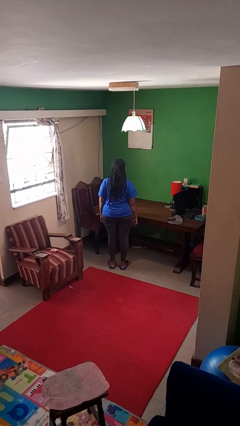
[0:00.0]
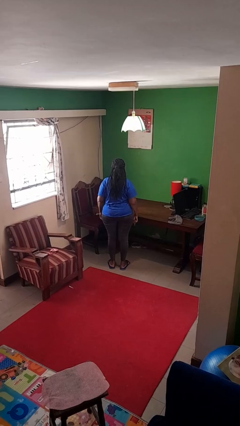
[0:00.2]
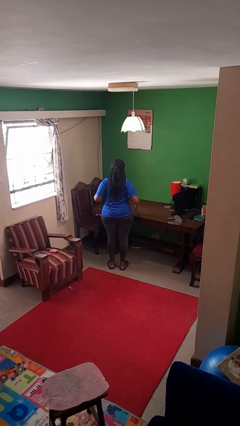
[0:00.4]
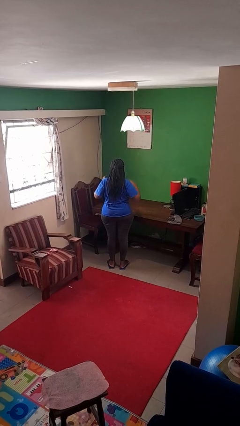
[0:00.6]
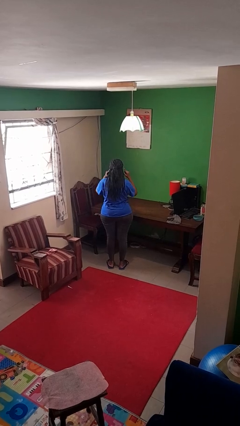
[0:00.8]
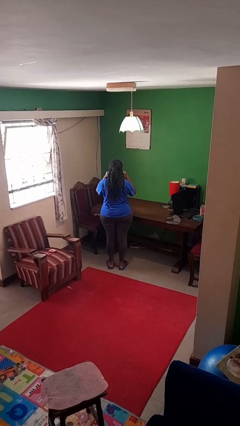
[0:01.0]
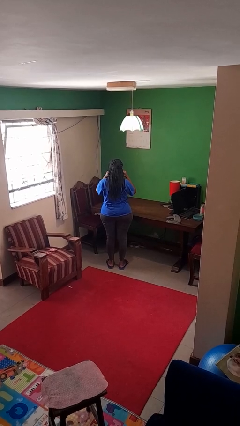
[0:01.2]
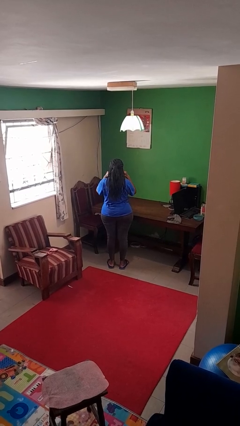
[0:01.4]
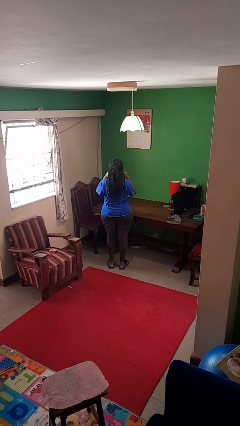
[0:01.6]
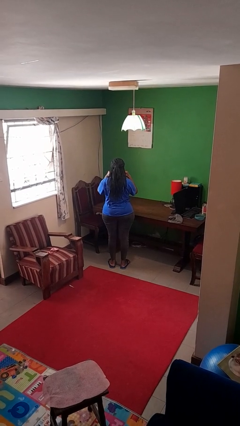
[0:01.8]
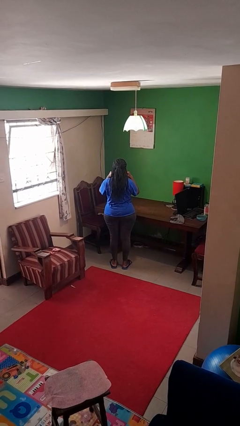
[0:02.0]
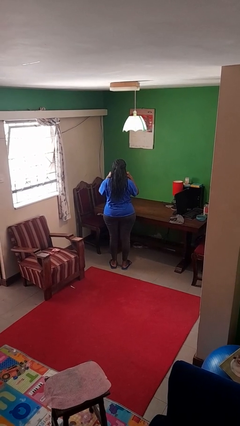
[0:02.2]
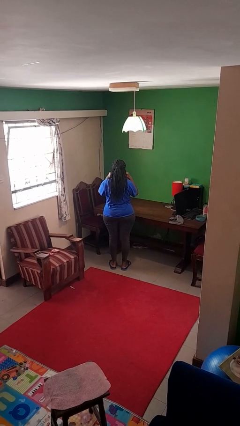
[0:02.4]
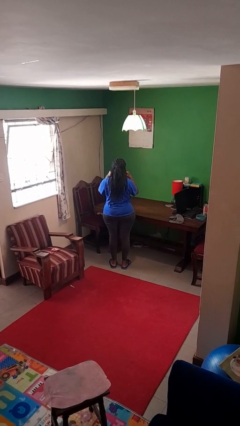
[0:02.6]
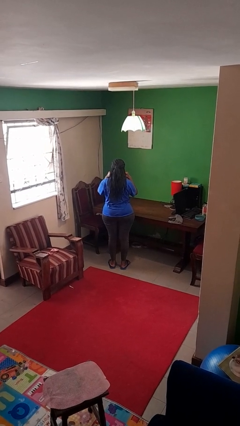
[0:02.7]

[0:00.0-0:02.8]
person puts fingers in ear

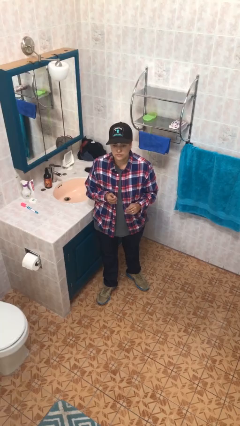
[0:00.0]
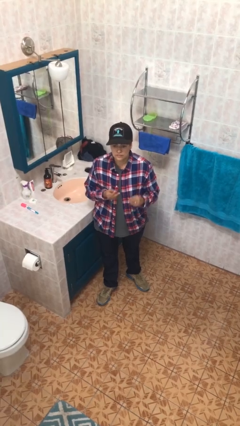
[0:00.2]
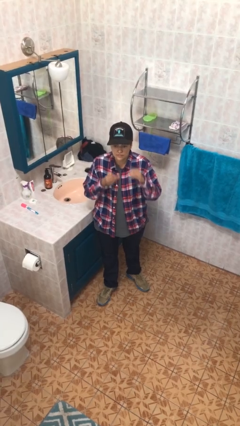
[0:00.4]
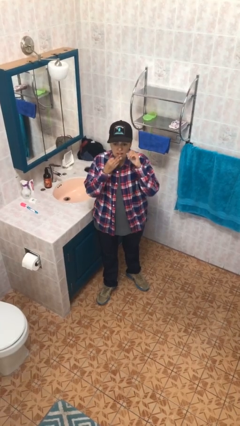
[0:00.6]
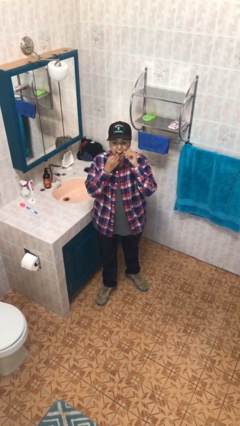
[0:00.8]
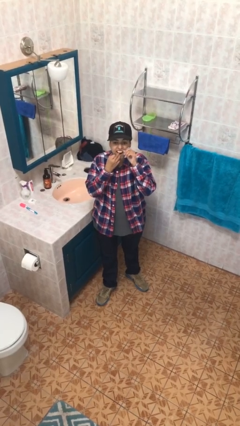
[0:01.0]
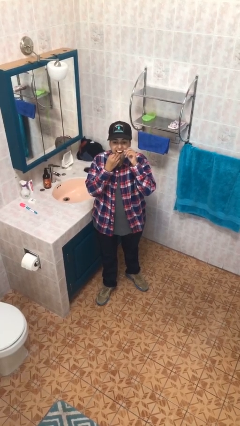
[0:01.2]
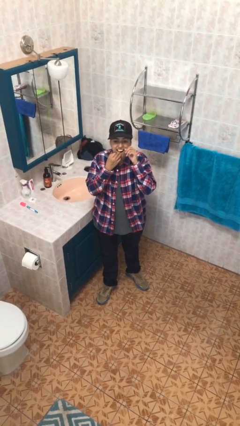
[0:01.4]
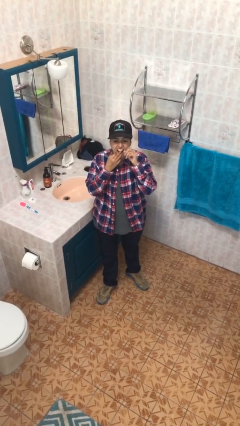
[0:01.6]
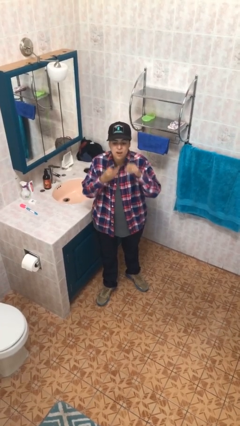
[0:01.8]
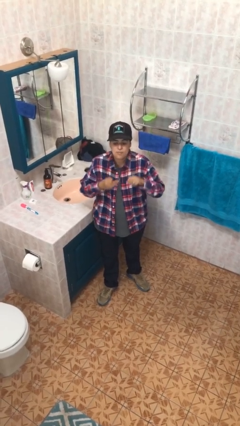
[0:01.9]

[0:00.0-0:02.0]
person flosses

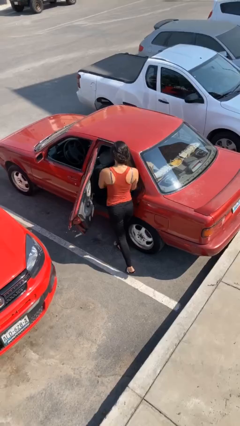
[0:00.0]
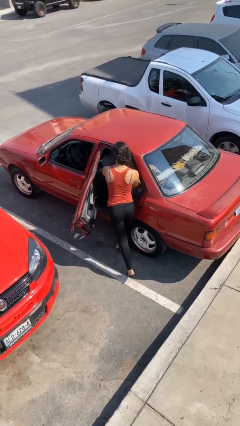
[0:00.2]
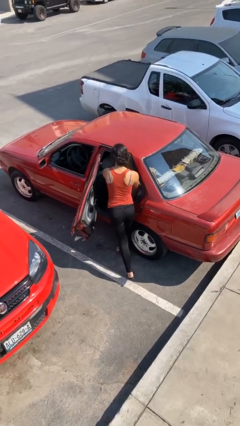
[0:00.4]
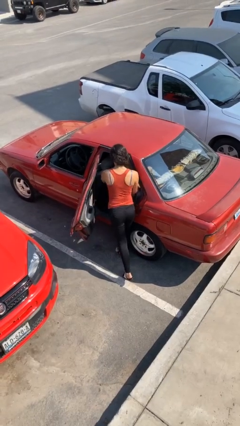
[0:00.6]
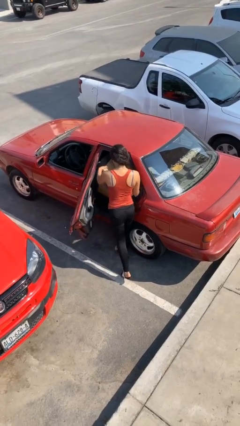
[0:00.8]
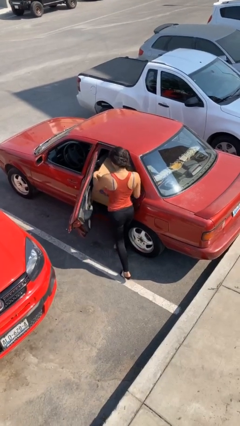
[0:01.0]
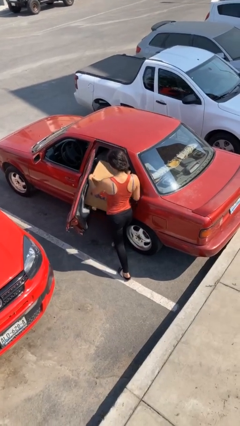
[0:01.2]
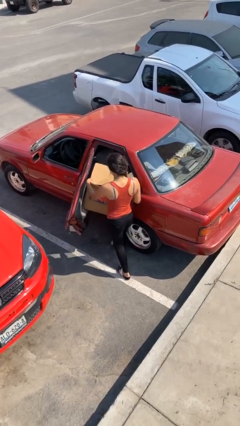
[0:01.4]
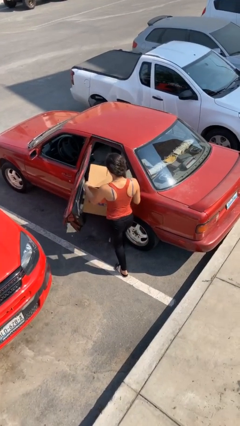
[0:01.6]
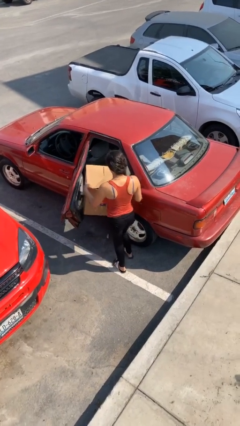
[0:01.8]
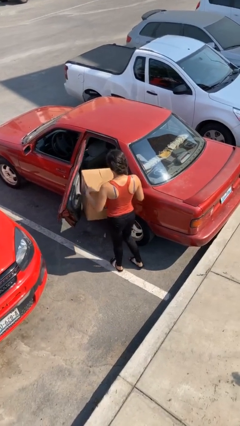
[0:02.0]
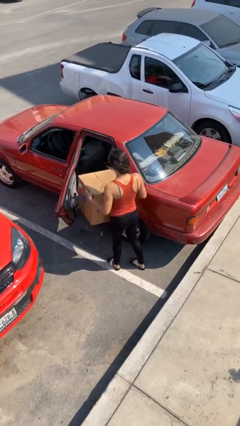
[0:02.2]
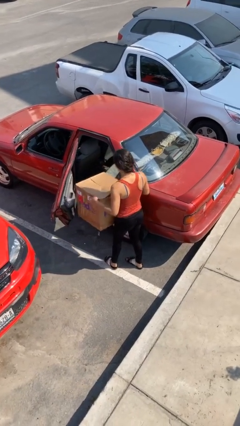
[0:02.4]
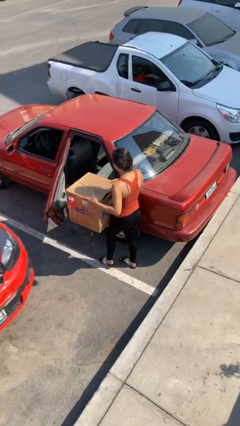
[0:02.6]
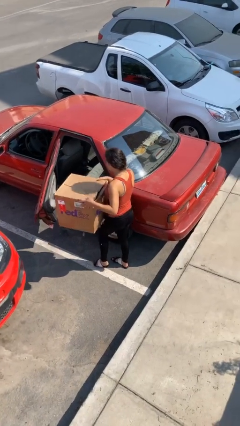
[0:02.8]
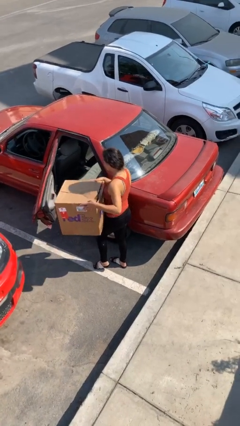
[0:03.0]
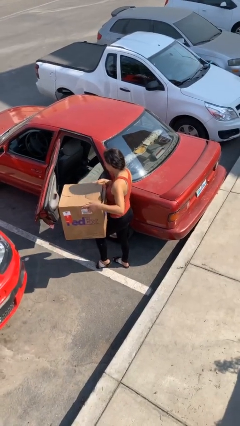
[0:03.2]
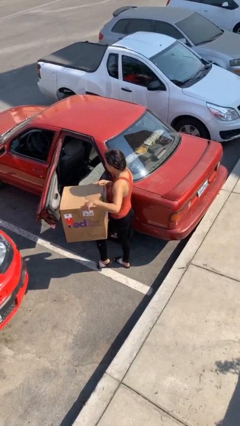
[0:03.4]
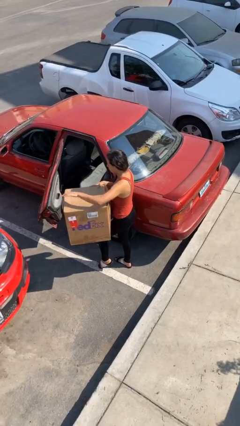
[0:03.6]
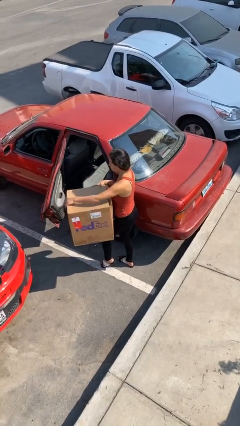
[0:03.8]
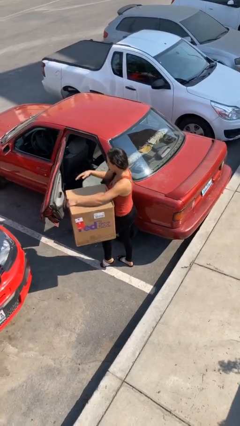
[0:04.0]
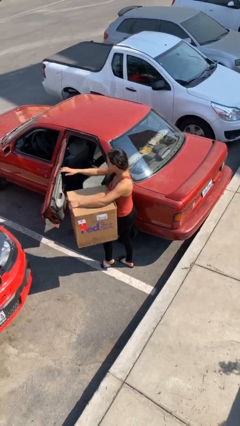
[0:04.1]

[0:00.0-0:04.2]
person unloads car

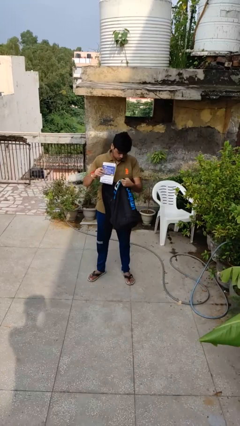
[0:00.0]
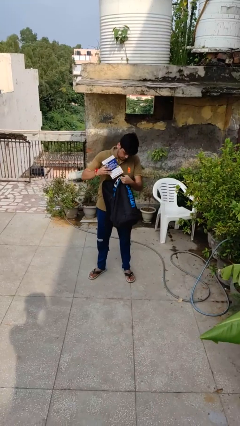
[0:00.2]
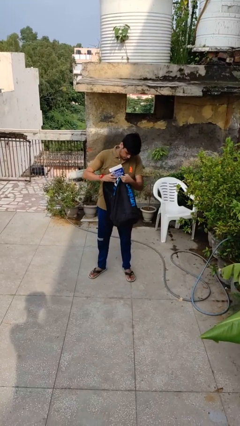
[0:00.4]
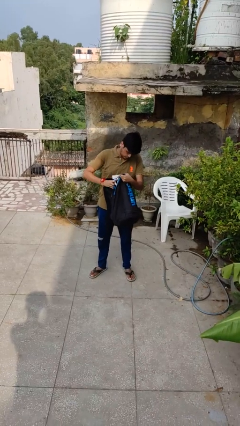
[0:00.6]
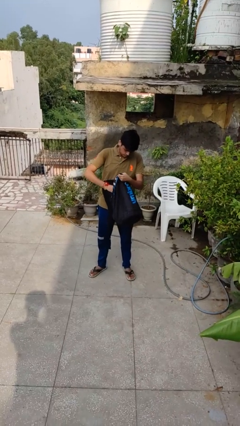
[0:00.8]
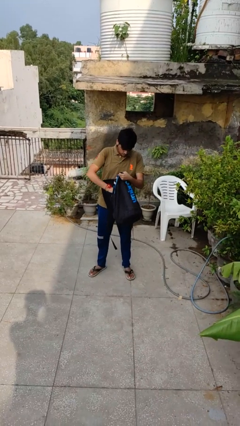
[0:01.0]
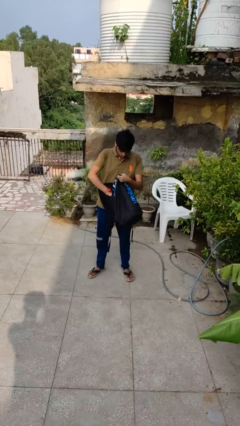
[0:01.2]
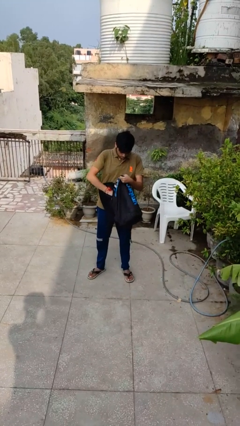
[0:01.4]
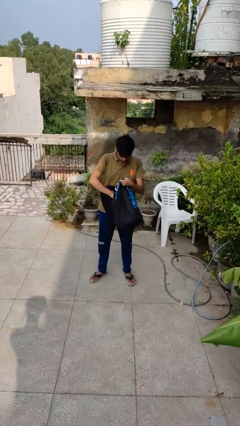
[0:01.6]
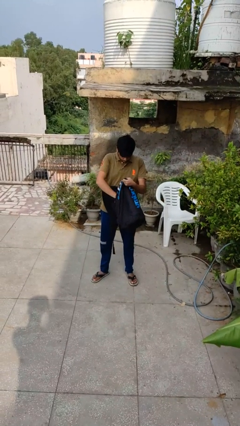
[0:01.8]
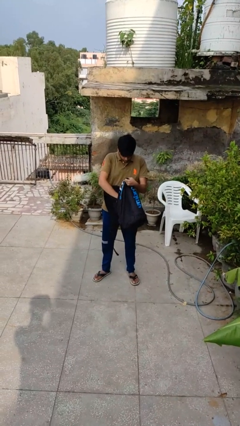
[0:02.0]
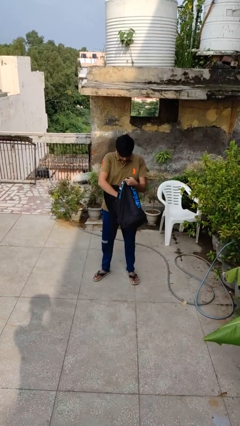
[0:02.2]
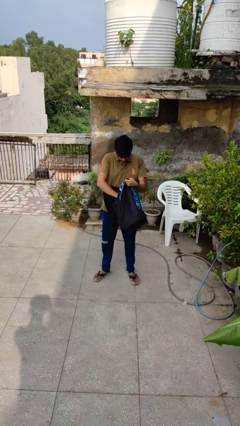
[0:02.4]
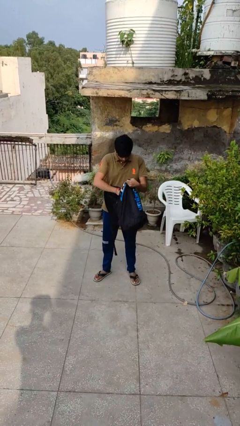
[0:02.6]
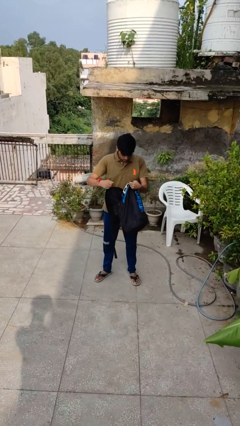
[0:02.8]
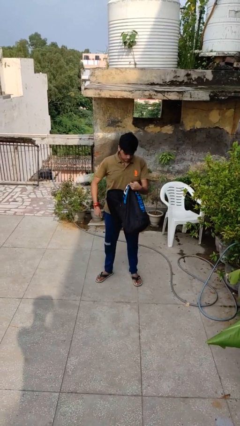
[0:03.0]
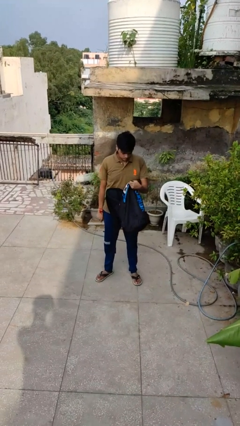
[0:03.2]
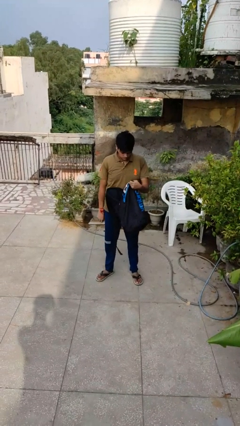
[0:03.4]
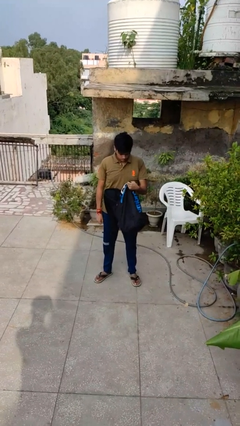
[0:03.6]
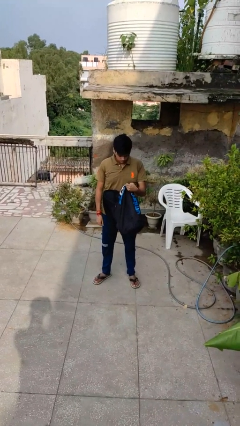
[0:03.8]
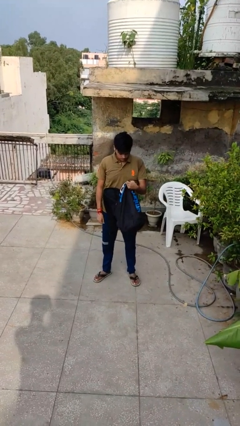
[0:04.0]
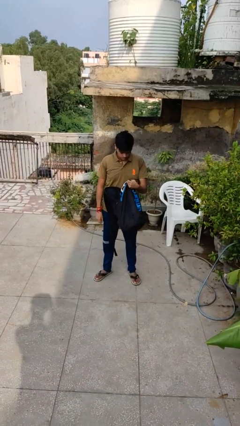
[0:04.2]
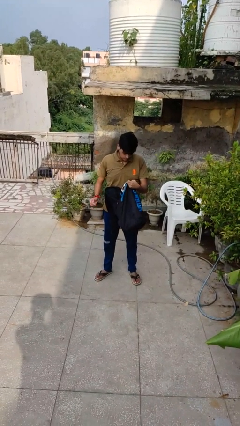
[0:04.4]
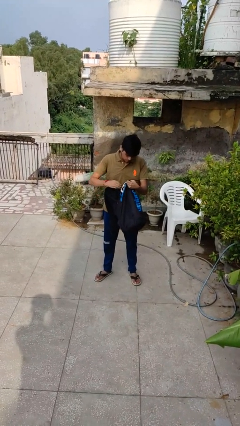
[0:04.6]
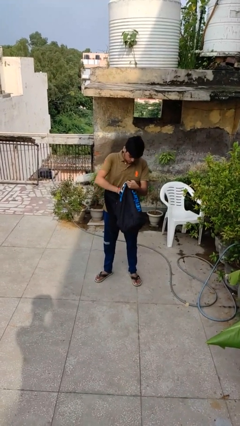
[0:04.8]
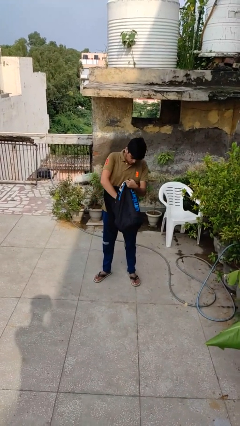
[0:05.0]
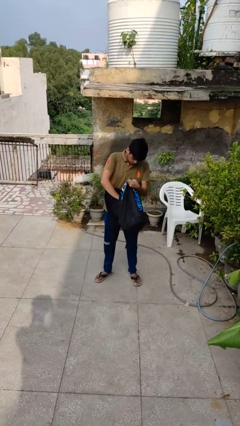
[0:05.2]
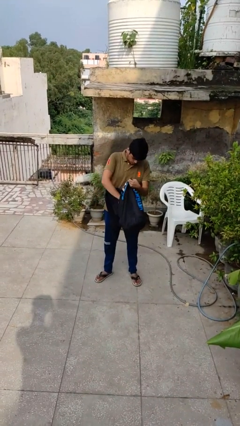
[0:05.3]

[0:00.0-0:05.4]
person puts object into backpack

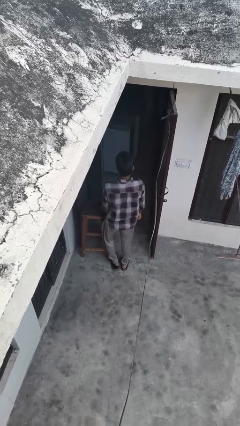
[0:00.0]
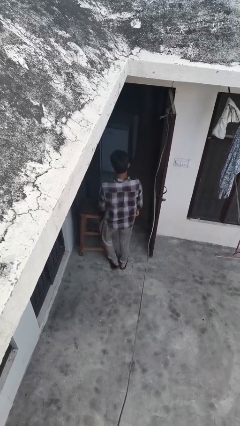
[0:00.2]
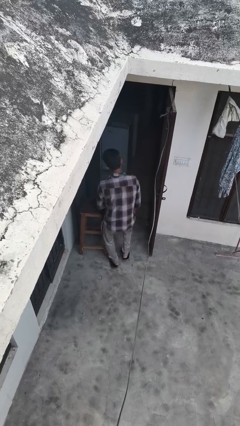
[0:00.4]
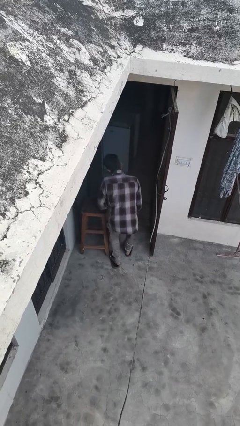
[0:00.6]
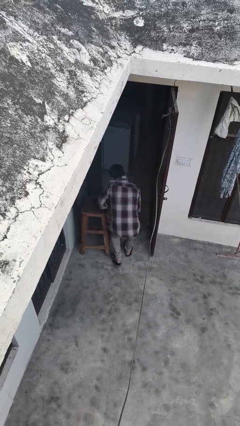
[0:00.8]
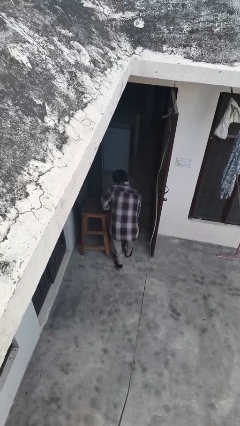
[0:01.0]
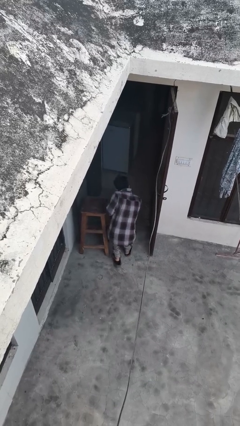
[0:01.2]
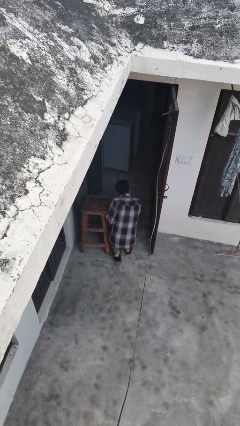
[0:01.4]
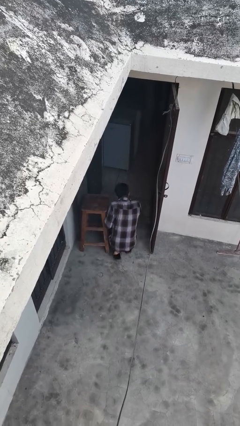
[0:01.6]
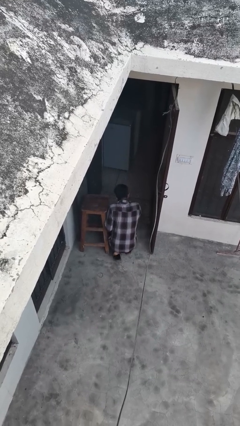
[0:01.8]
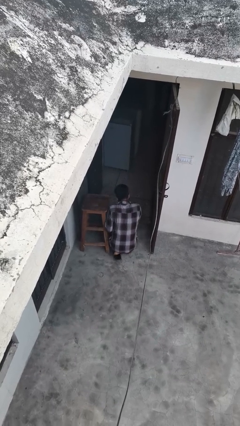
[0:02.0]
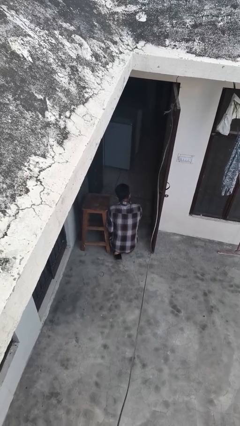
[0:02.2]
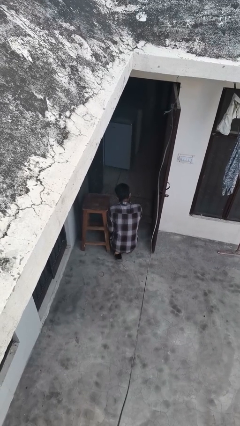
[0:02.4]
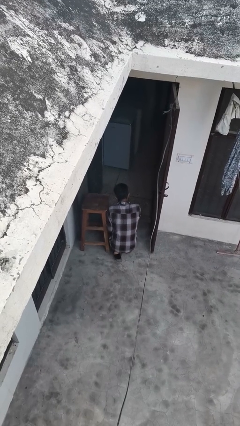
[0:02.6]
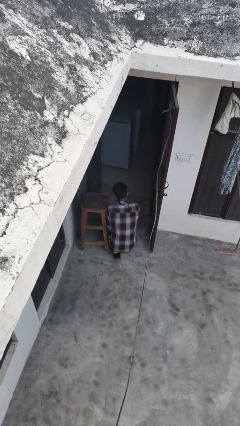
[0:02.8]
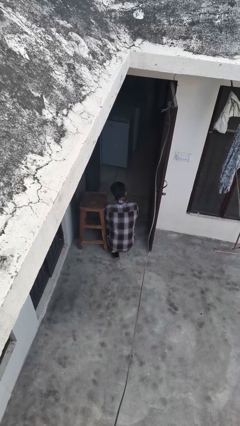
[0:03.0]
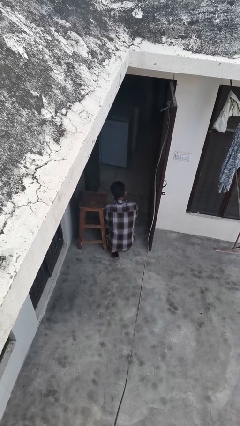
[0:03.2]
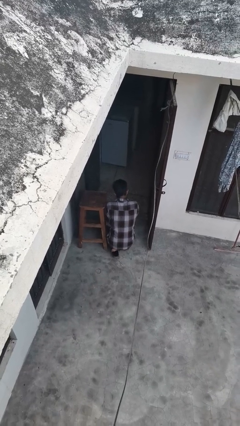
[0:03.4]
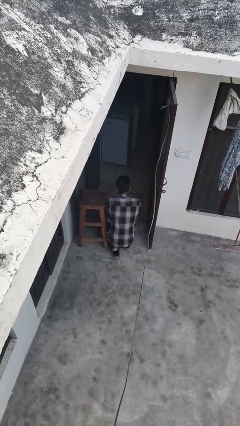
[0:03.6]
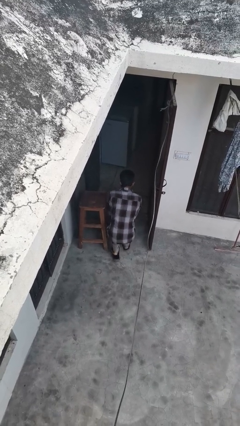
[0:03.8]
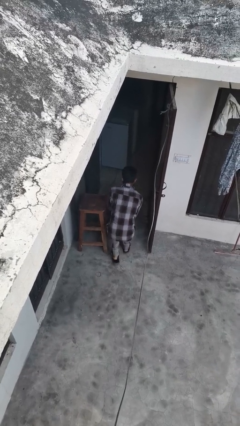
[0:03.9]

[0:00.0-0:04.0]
person trips on object on floor
